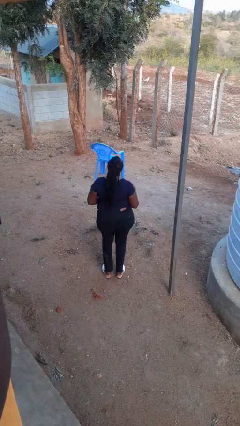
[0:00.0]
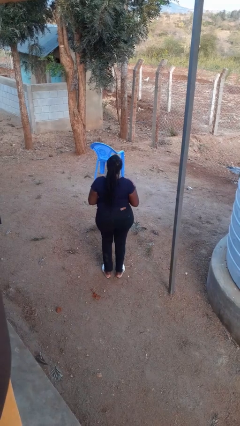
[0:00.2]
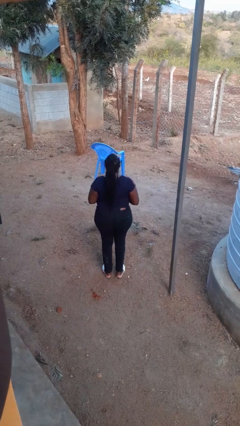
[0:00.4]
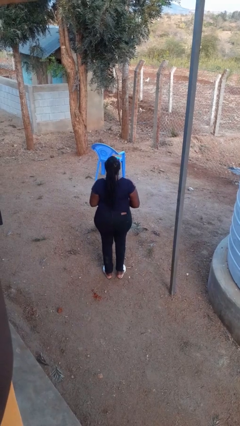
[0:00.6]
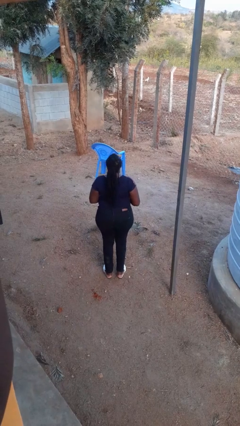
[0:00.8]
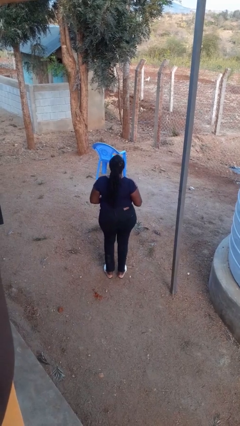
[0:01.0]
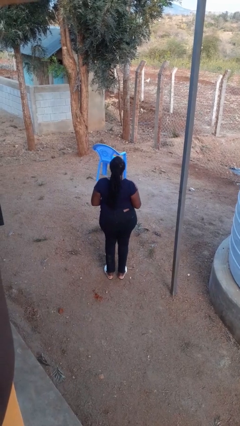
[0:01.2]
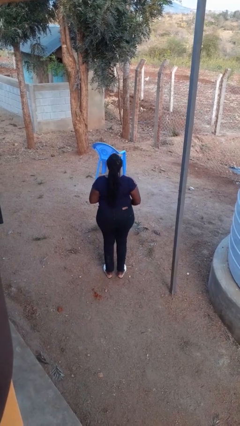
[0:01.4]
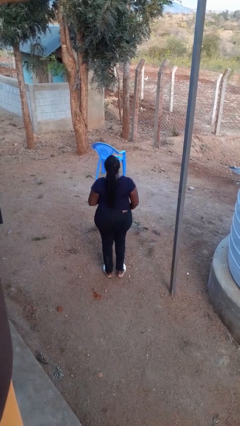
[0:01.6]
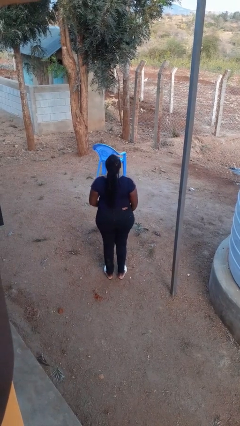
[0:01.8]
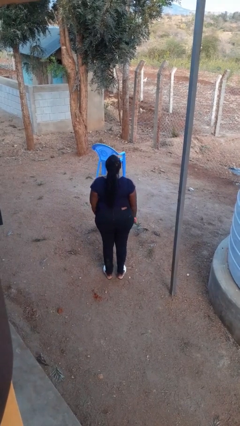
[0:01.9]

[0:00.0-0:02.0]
person wiggles hips

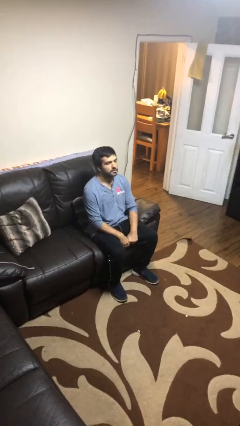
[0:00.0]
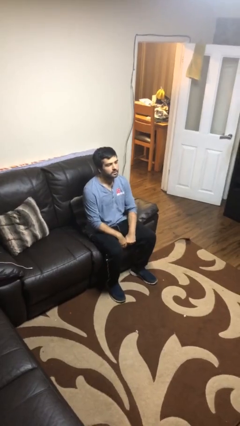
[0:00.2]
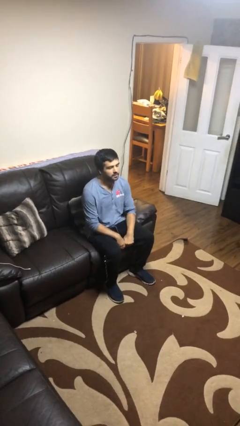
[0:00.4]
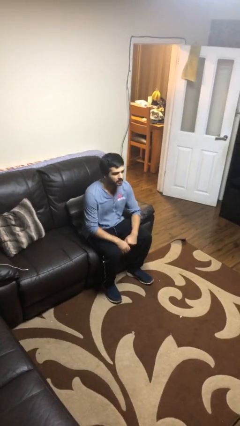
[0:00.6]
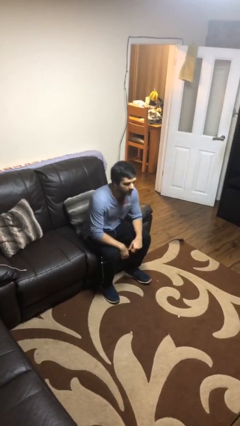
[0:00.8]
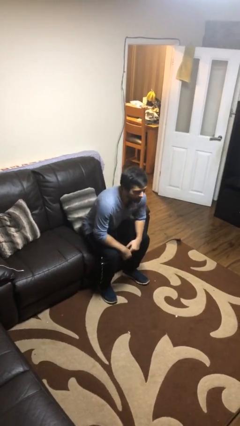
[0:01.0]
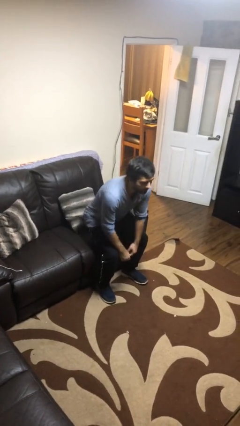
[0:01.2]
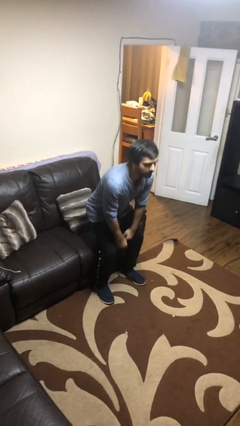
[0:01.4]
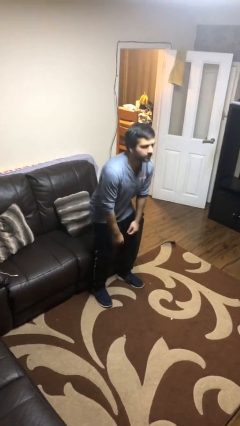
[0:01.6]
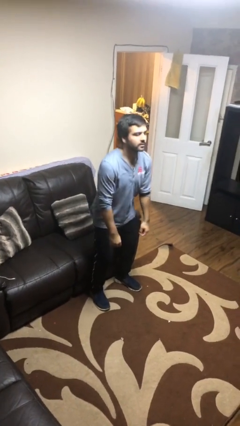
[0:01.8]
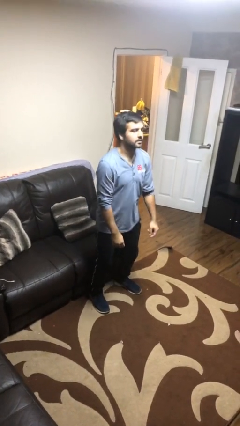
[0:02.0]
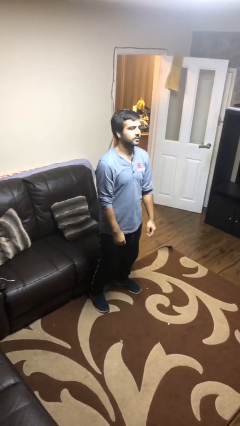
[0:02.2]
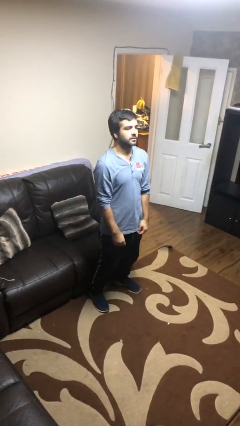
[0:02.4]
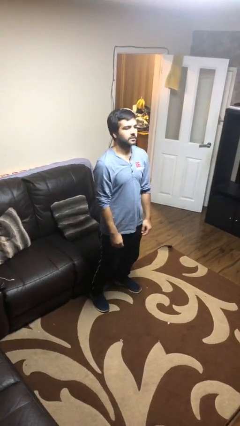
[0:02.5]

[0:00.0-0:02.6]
person stands up

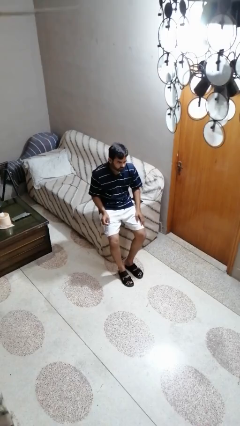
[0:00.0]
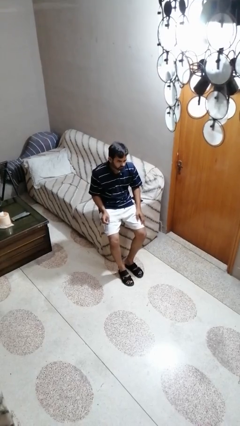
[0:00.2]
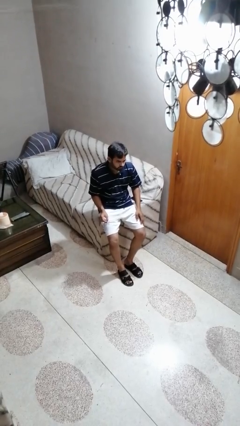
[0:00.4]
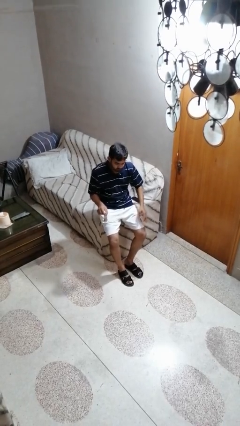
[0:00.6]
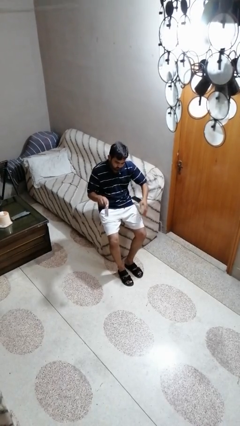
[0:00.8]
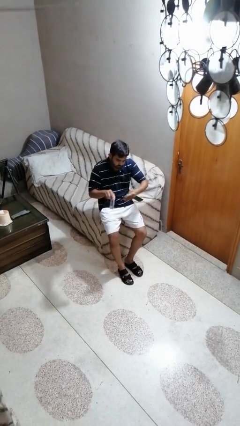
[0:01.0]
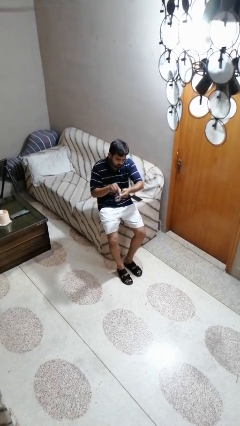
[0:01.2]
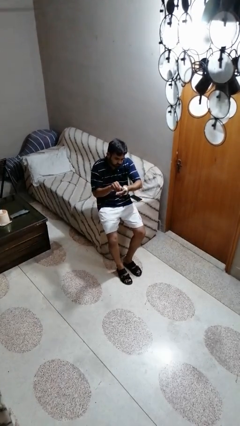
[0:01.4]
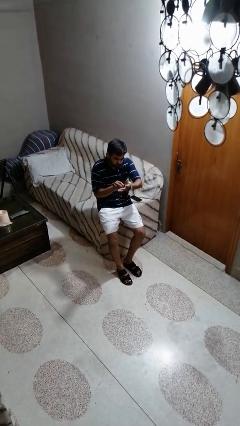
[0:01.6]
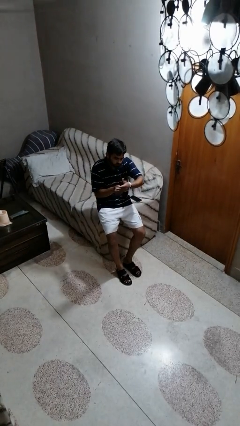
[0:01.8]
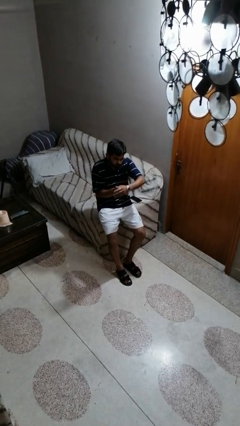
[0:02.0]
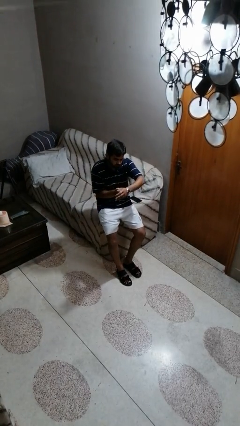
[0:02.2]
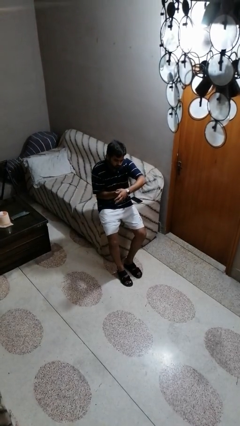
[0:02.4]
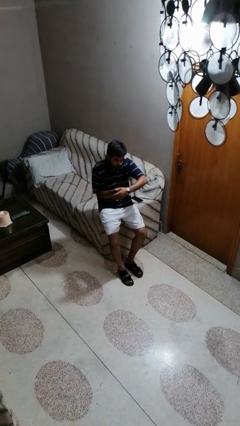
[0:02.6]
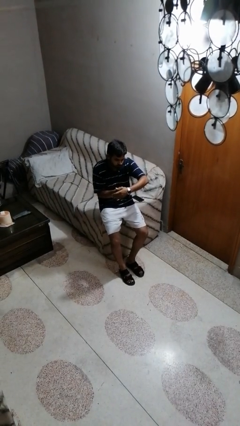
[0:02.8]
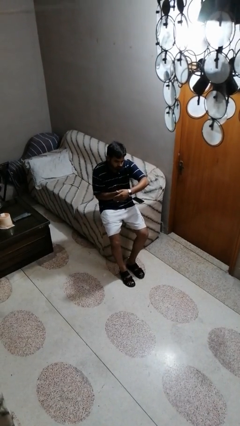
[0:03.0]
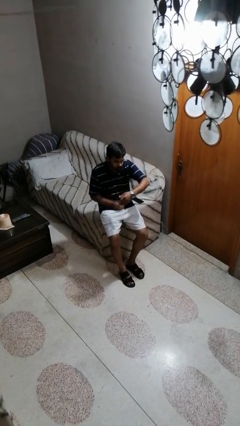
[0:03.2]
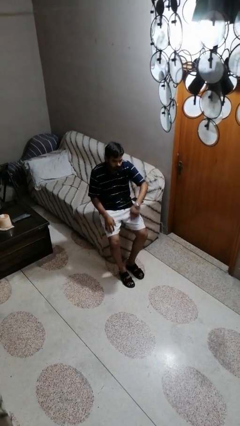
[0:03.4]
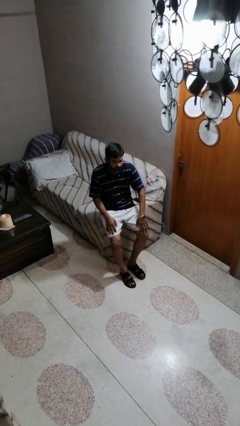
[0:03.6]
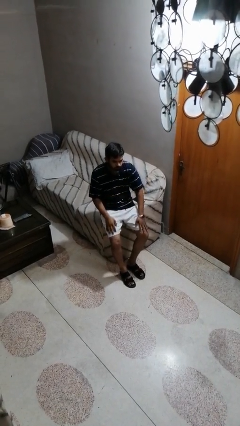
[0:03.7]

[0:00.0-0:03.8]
person puts on wristwatch

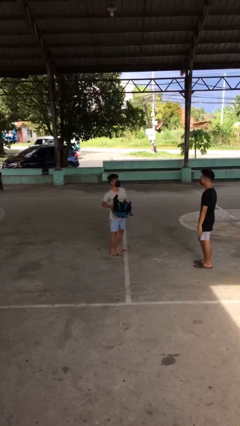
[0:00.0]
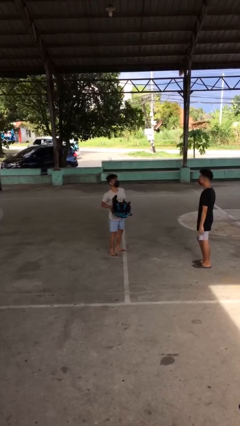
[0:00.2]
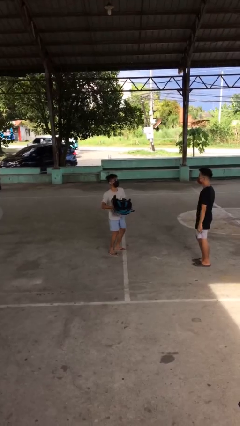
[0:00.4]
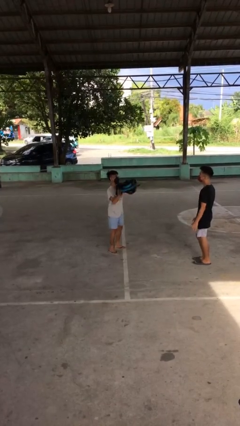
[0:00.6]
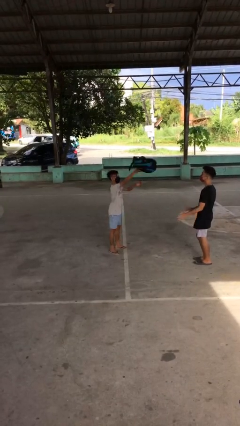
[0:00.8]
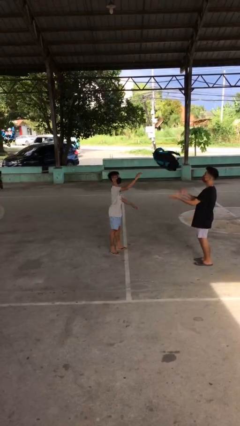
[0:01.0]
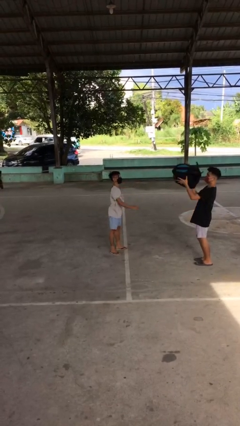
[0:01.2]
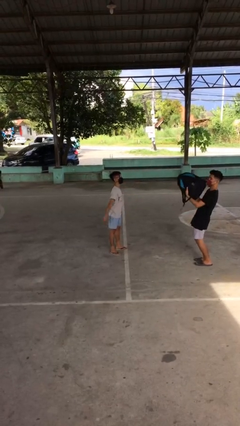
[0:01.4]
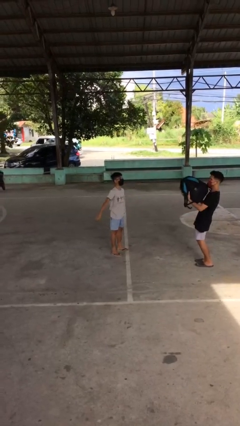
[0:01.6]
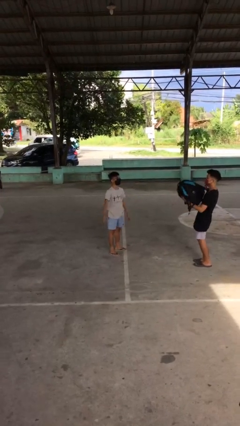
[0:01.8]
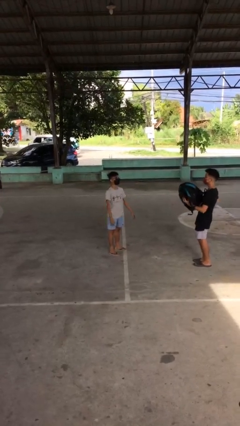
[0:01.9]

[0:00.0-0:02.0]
person throws object to person

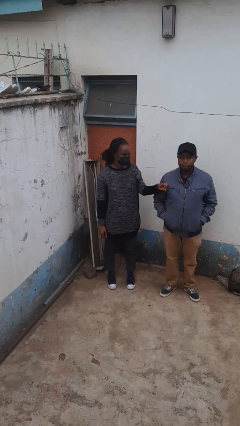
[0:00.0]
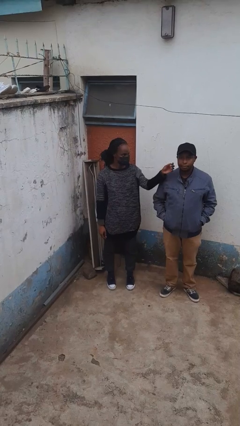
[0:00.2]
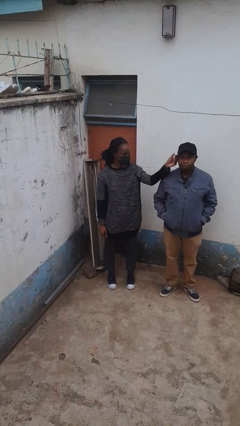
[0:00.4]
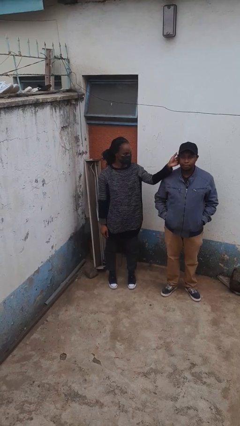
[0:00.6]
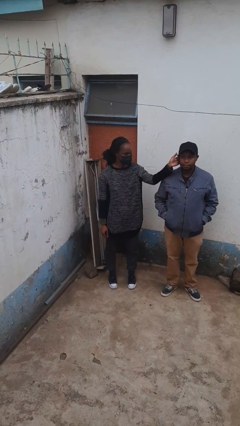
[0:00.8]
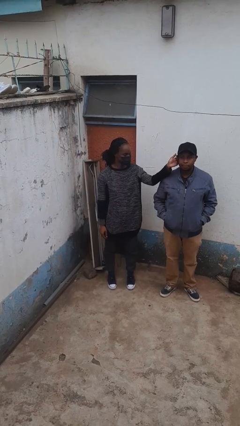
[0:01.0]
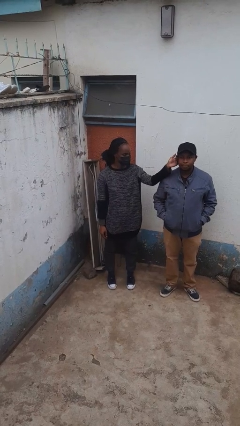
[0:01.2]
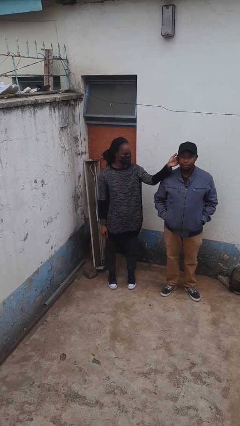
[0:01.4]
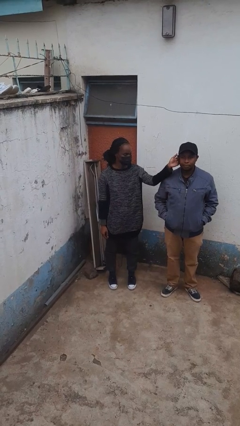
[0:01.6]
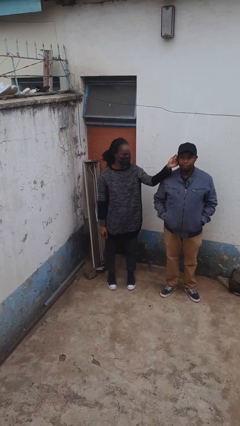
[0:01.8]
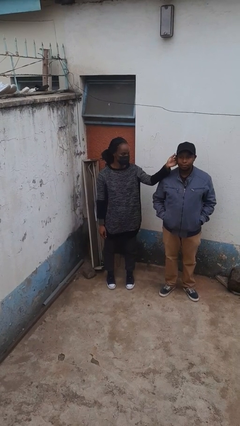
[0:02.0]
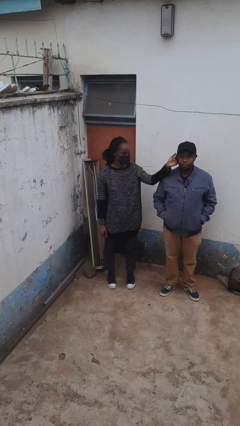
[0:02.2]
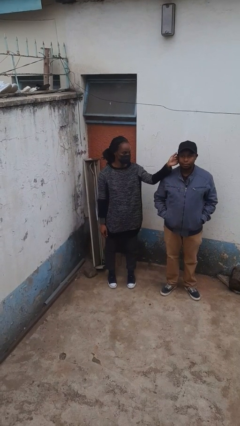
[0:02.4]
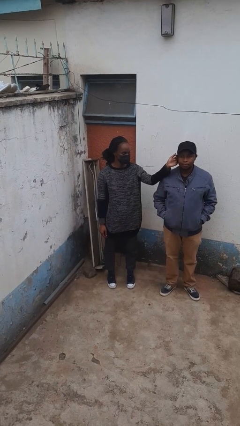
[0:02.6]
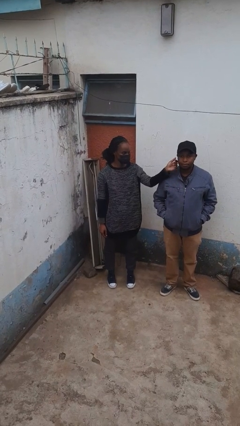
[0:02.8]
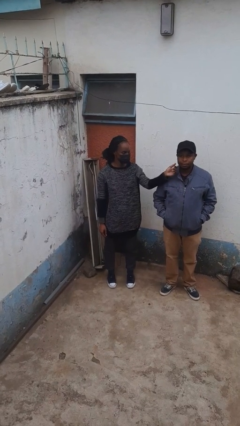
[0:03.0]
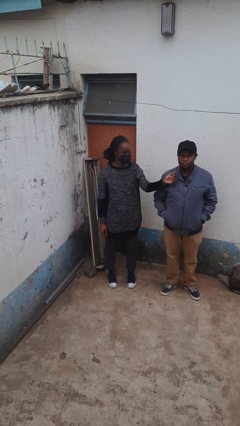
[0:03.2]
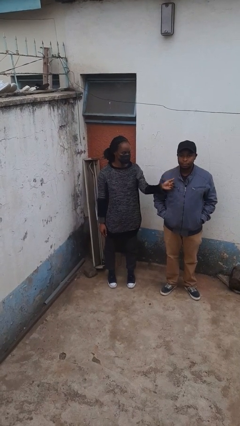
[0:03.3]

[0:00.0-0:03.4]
person touches face of person

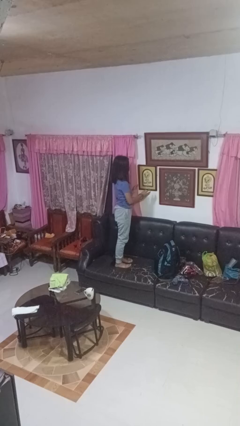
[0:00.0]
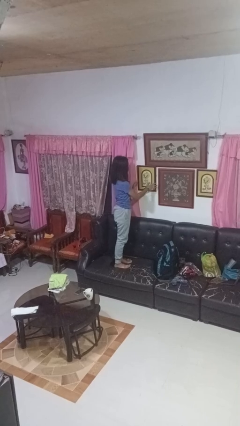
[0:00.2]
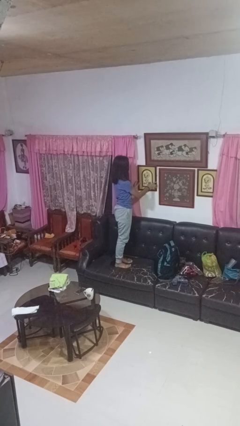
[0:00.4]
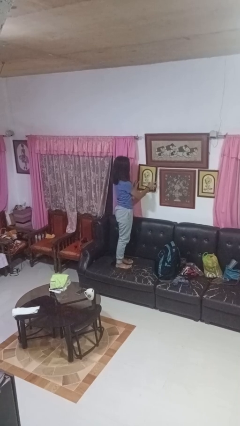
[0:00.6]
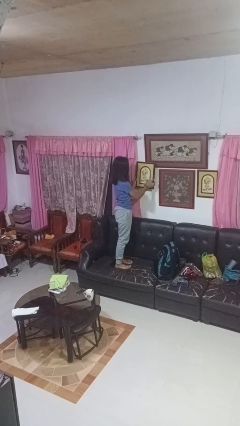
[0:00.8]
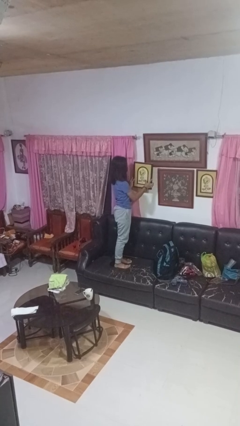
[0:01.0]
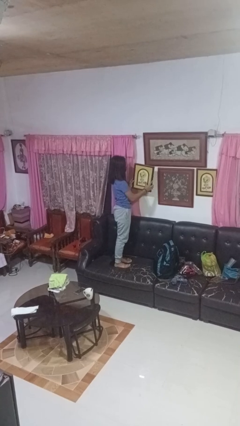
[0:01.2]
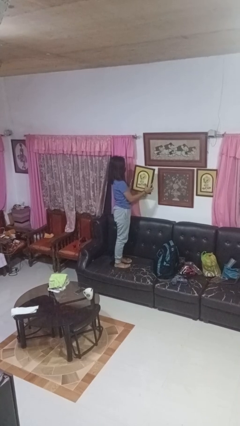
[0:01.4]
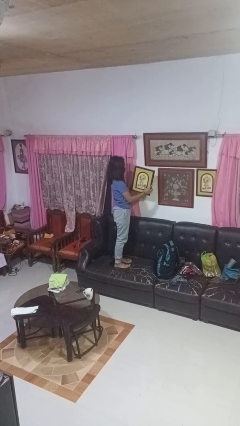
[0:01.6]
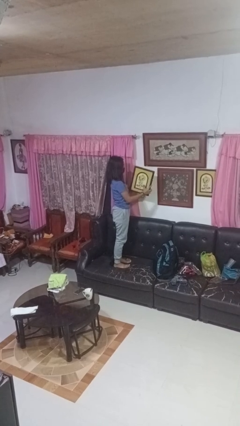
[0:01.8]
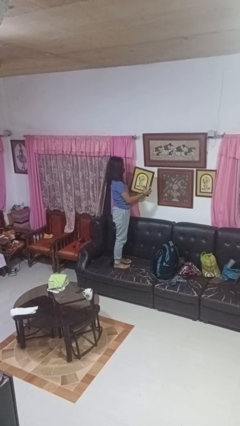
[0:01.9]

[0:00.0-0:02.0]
person takes down picture frame

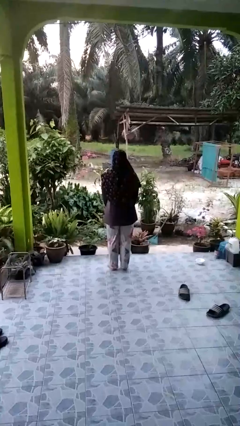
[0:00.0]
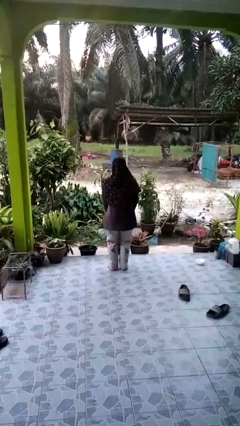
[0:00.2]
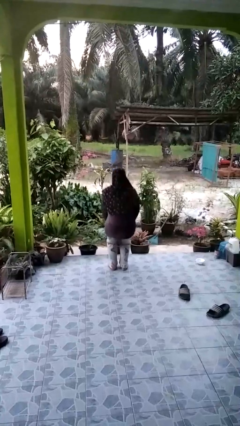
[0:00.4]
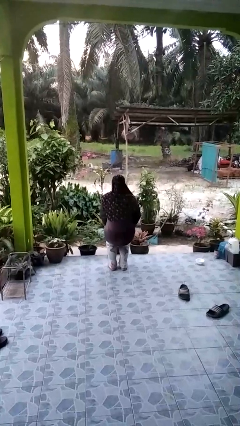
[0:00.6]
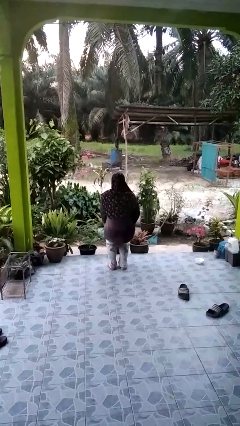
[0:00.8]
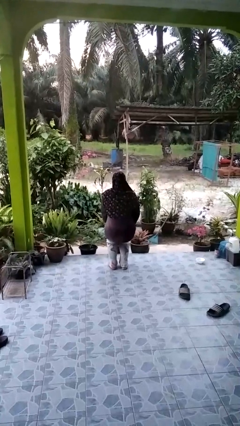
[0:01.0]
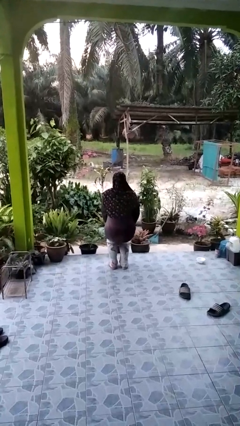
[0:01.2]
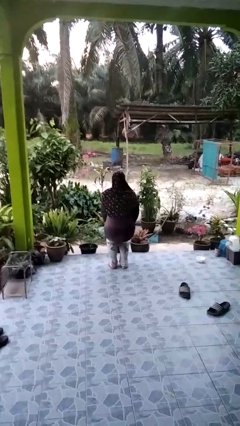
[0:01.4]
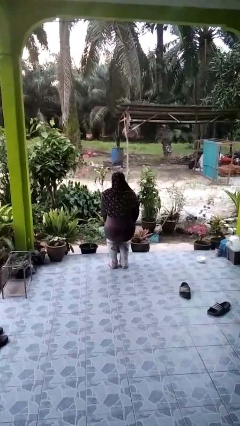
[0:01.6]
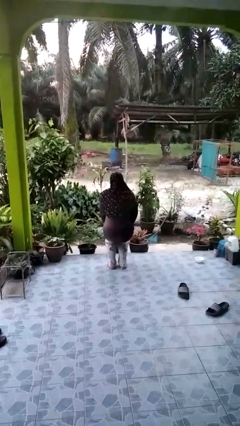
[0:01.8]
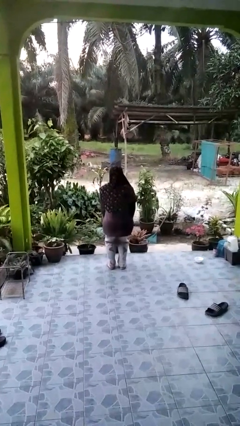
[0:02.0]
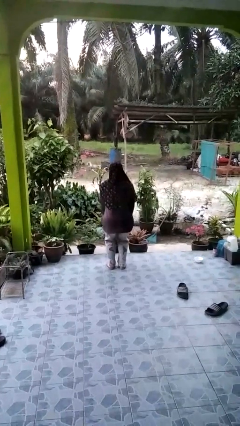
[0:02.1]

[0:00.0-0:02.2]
person squats
